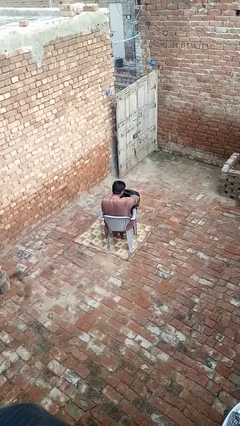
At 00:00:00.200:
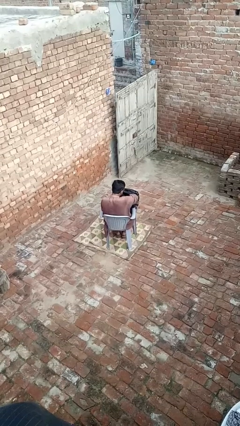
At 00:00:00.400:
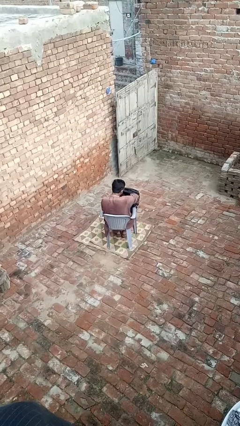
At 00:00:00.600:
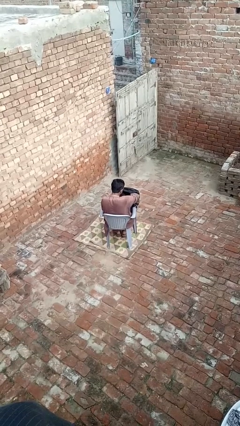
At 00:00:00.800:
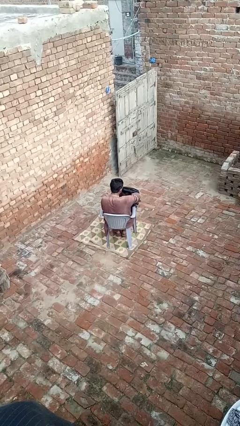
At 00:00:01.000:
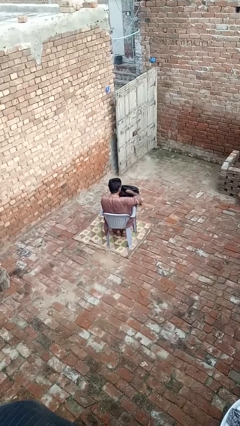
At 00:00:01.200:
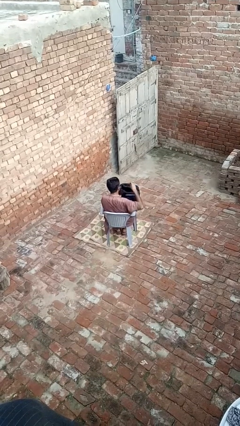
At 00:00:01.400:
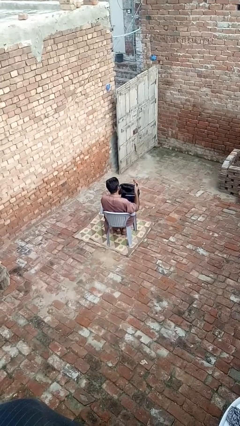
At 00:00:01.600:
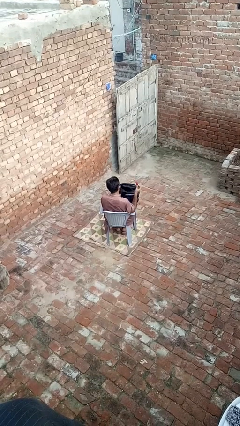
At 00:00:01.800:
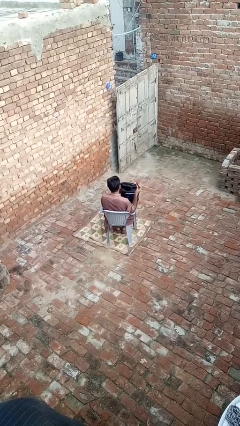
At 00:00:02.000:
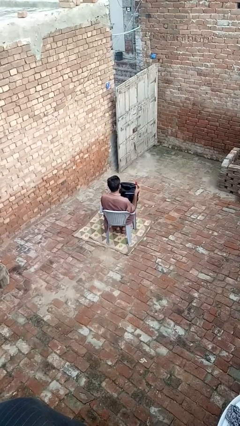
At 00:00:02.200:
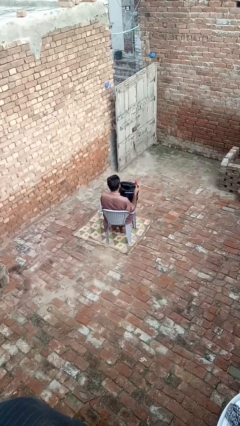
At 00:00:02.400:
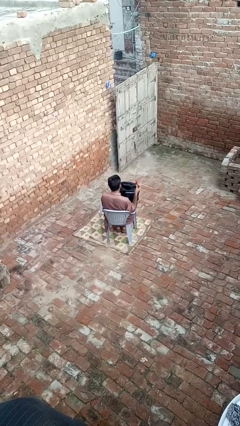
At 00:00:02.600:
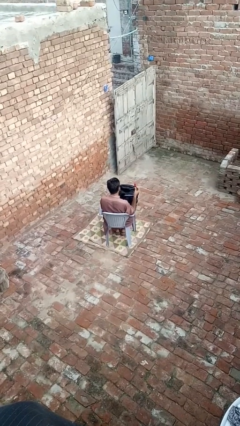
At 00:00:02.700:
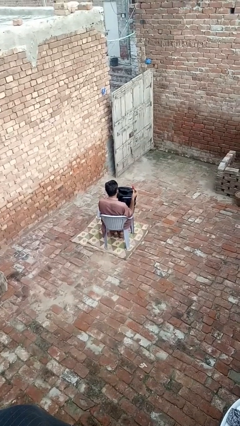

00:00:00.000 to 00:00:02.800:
person takes object from backpack

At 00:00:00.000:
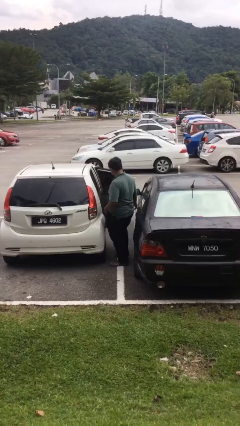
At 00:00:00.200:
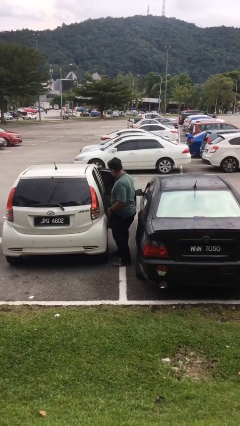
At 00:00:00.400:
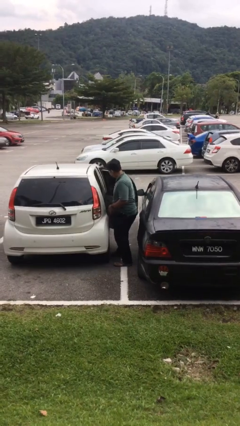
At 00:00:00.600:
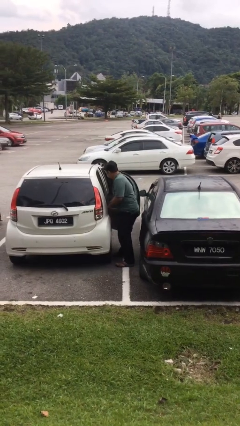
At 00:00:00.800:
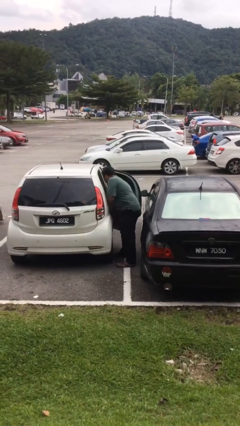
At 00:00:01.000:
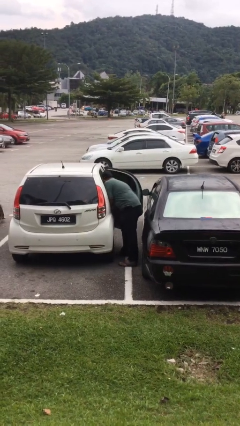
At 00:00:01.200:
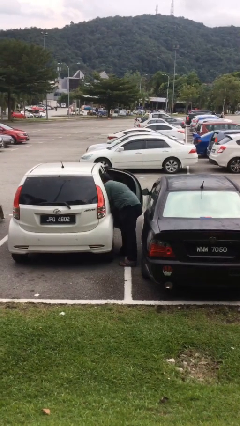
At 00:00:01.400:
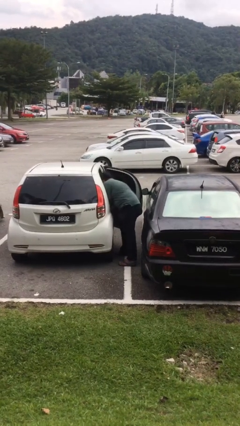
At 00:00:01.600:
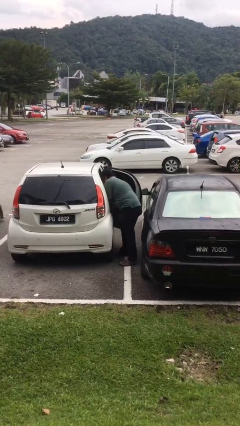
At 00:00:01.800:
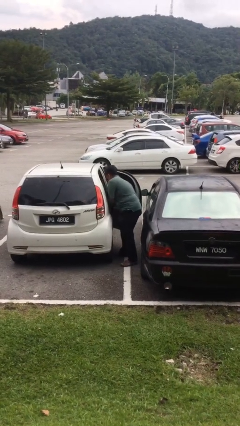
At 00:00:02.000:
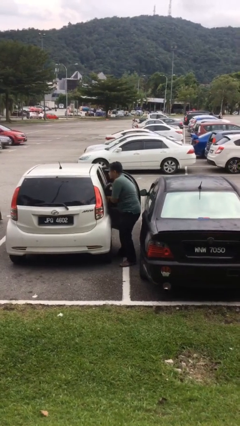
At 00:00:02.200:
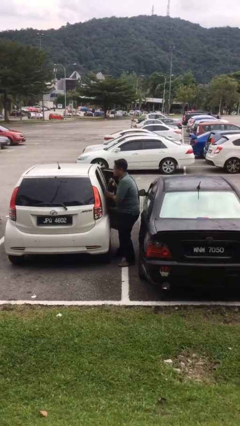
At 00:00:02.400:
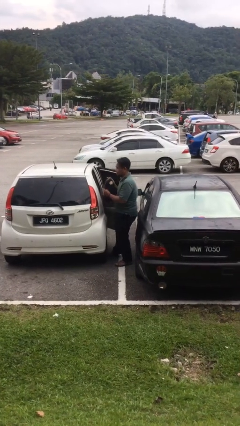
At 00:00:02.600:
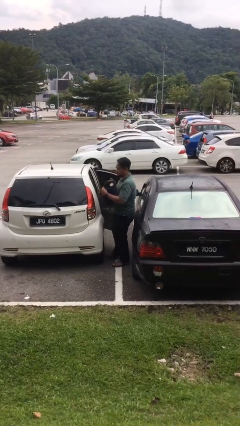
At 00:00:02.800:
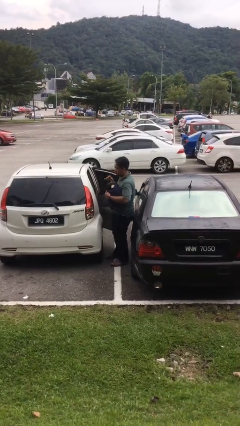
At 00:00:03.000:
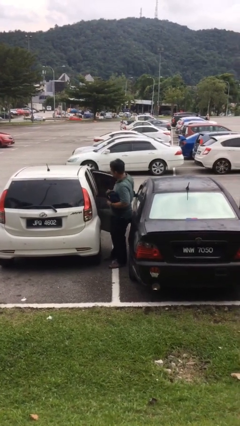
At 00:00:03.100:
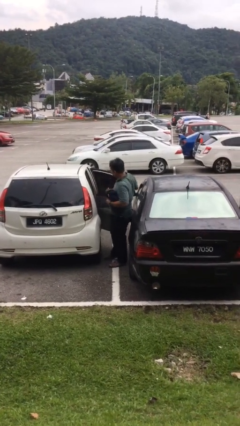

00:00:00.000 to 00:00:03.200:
person unloads car

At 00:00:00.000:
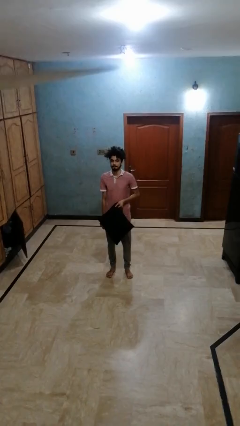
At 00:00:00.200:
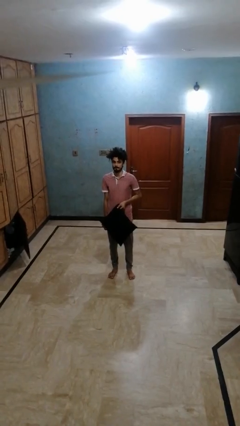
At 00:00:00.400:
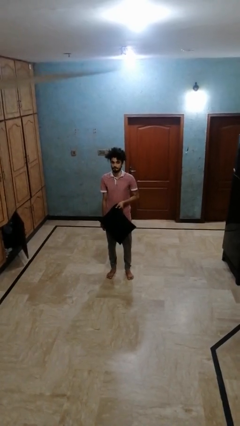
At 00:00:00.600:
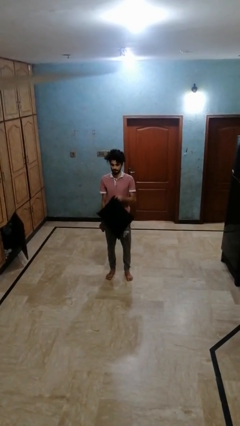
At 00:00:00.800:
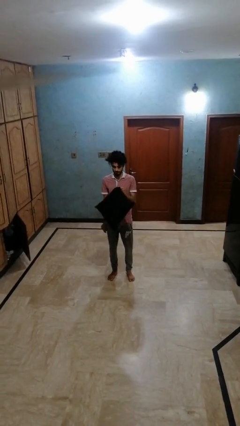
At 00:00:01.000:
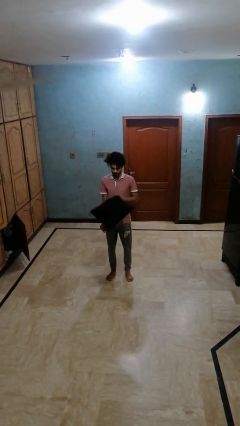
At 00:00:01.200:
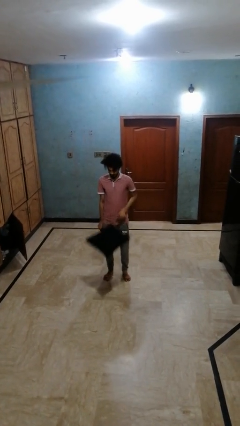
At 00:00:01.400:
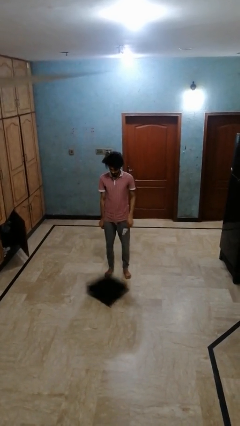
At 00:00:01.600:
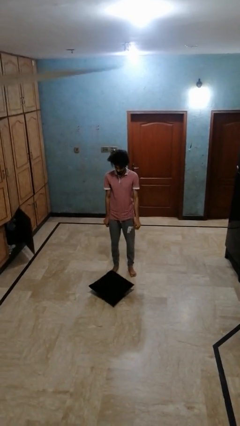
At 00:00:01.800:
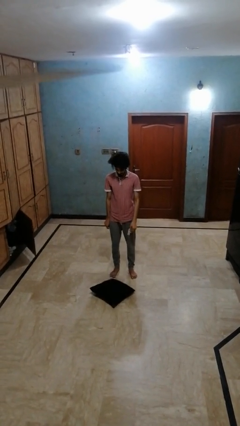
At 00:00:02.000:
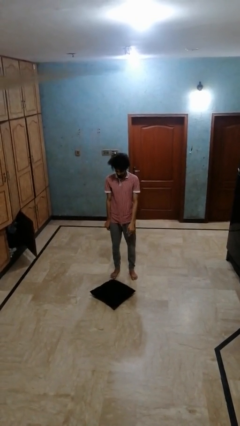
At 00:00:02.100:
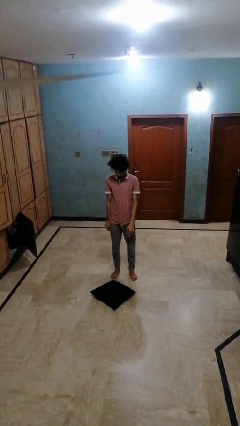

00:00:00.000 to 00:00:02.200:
person throws object to ground

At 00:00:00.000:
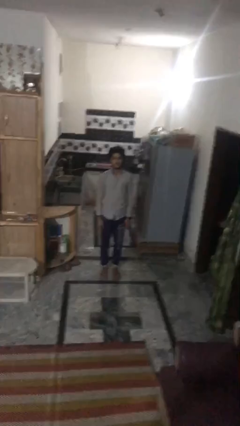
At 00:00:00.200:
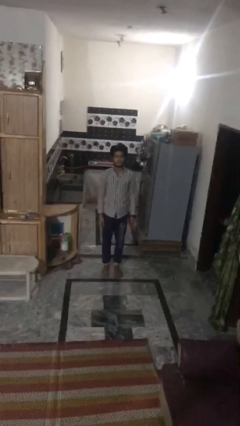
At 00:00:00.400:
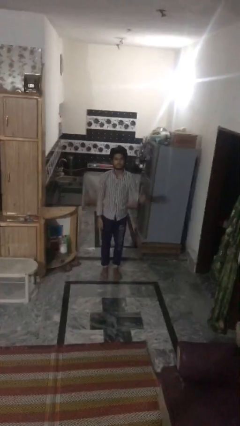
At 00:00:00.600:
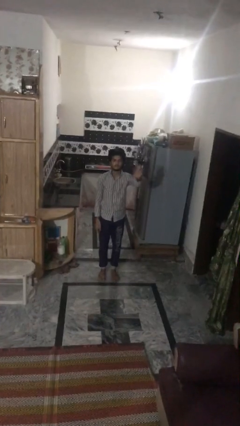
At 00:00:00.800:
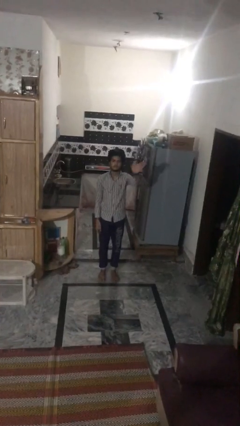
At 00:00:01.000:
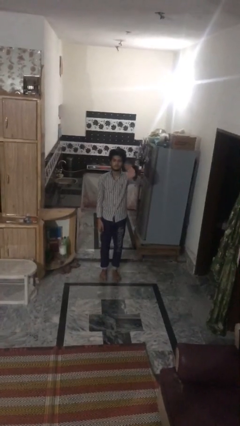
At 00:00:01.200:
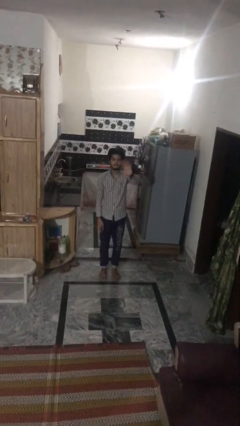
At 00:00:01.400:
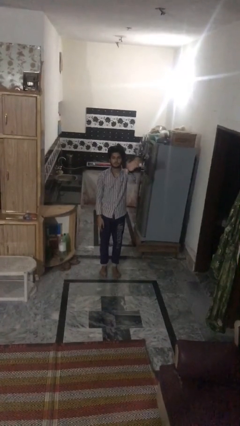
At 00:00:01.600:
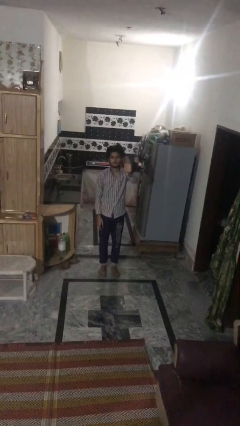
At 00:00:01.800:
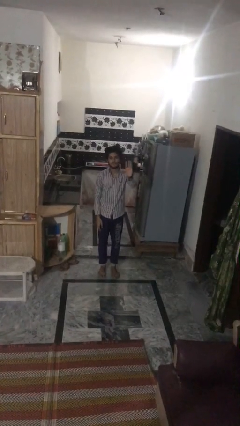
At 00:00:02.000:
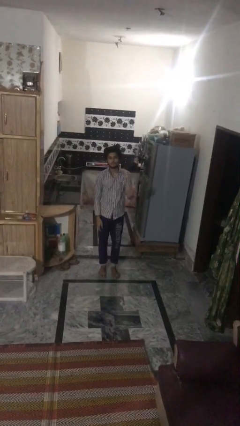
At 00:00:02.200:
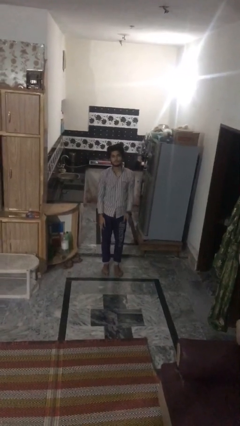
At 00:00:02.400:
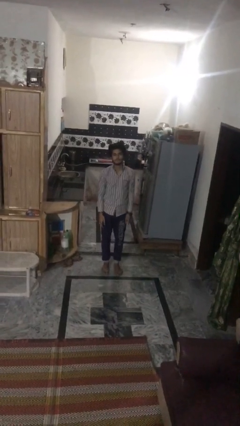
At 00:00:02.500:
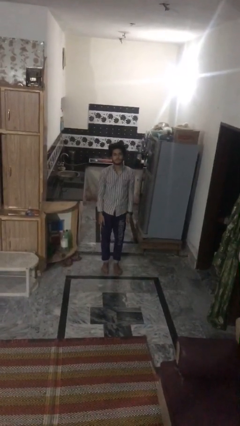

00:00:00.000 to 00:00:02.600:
person waves at person

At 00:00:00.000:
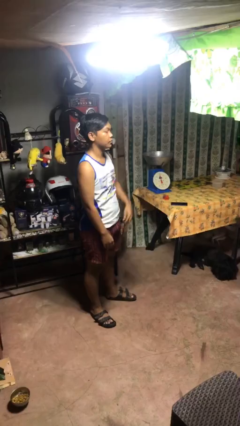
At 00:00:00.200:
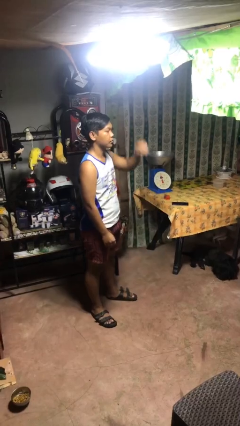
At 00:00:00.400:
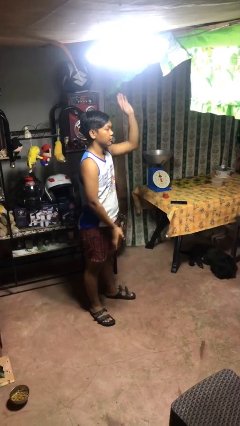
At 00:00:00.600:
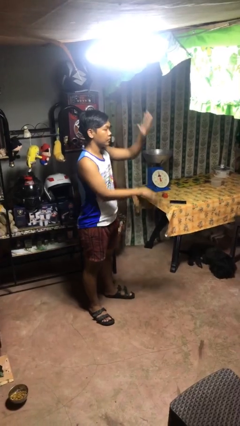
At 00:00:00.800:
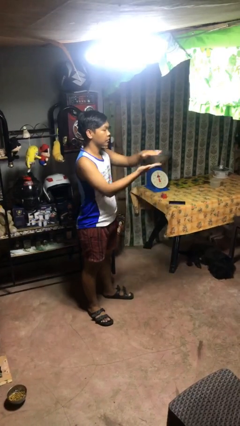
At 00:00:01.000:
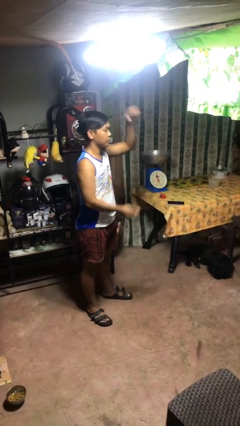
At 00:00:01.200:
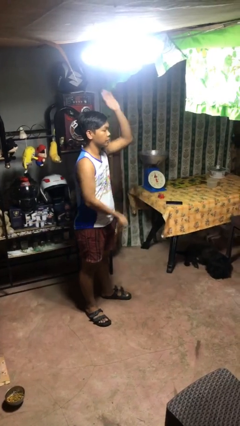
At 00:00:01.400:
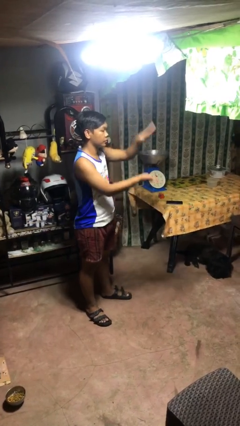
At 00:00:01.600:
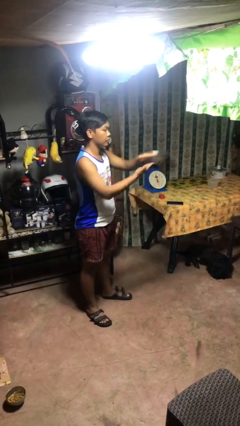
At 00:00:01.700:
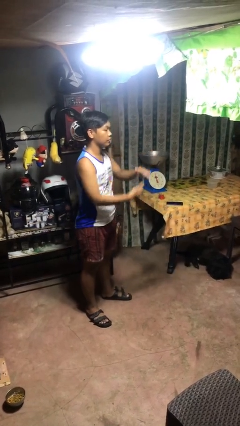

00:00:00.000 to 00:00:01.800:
person gestures zoom out

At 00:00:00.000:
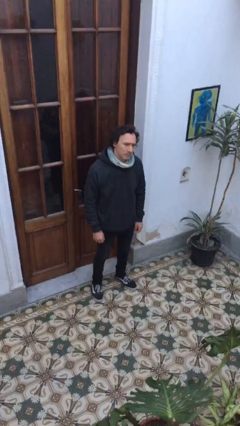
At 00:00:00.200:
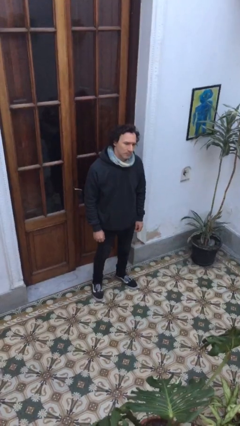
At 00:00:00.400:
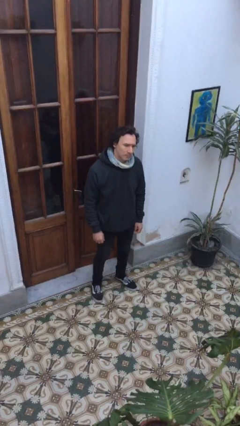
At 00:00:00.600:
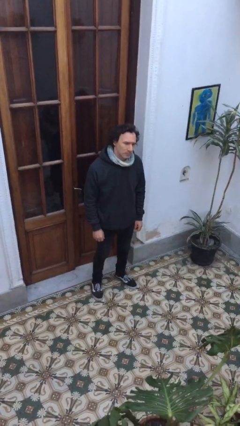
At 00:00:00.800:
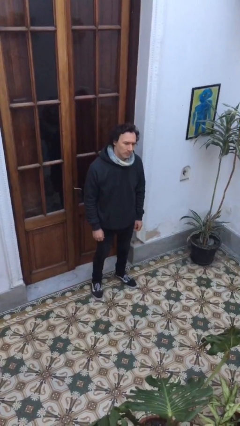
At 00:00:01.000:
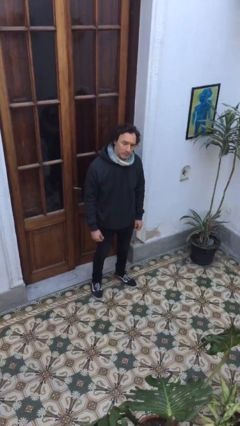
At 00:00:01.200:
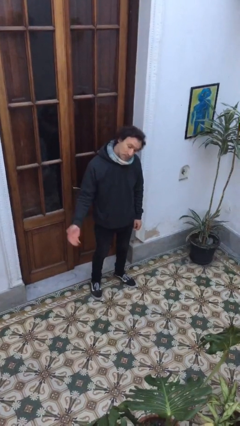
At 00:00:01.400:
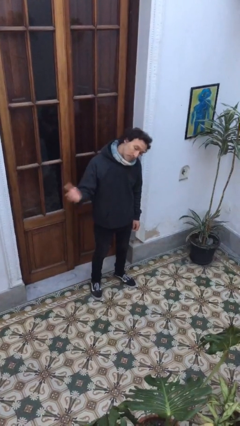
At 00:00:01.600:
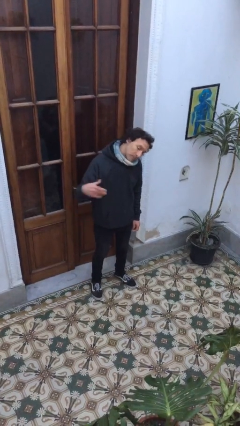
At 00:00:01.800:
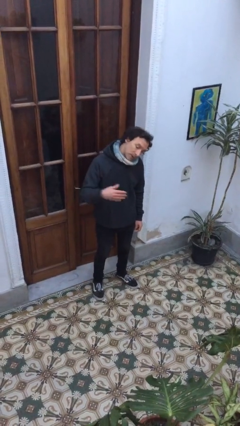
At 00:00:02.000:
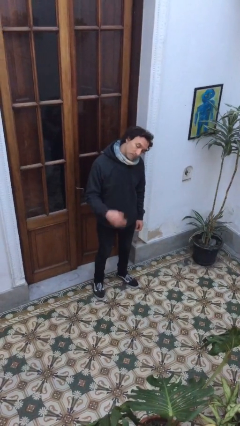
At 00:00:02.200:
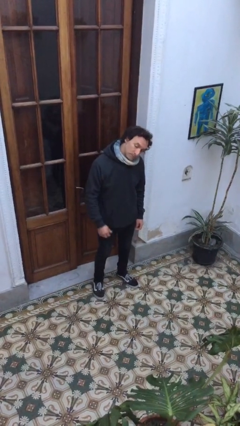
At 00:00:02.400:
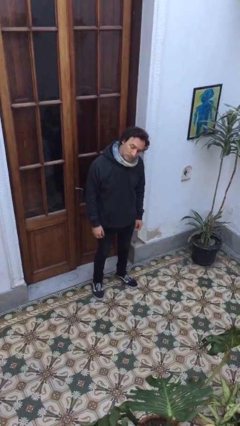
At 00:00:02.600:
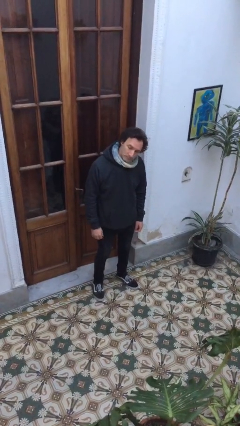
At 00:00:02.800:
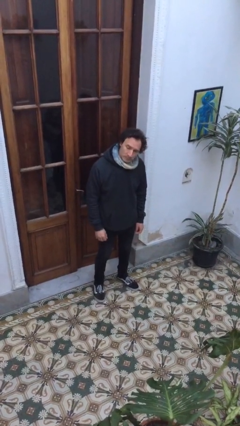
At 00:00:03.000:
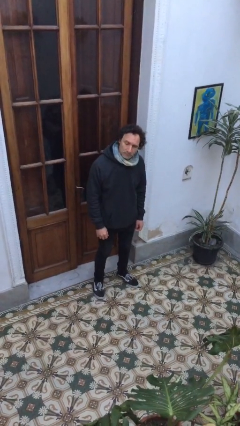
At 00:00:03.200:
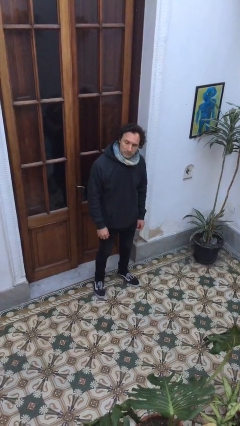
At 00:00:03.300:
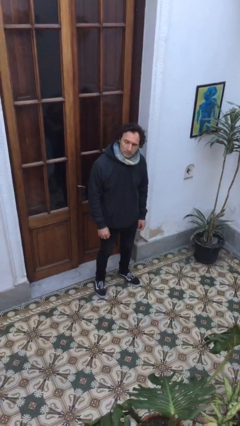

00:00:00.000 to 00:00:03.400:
person gestures come here

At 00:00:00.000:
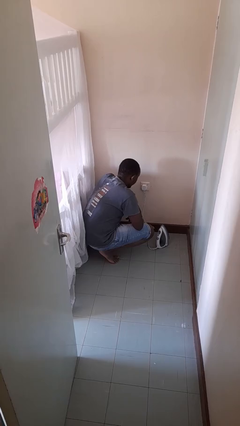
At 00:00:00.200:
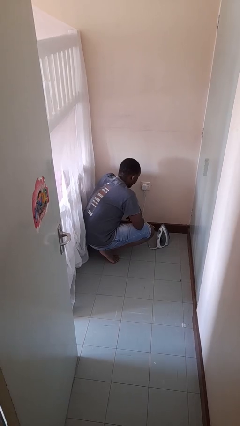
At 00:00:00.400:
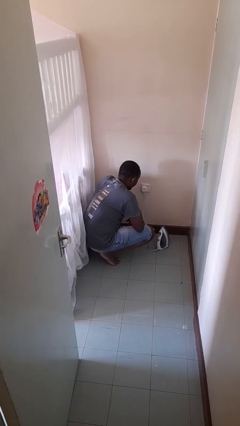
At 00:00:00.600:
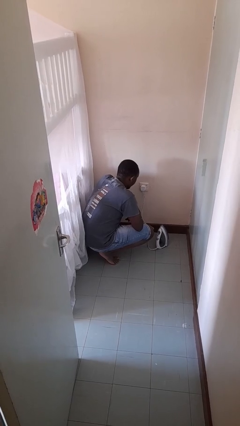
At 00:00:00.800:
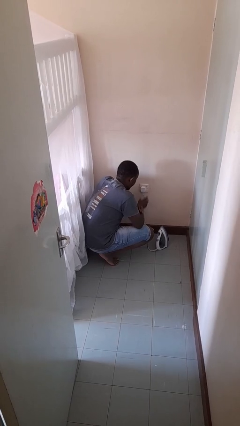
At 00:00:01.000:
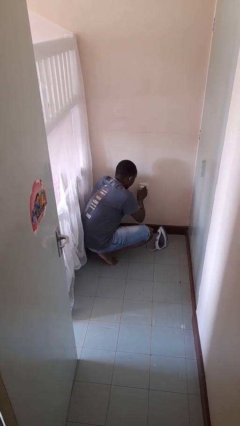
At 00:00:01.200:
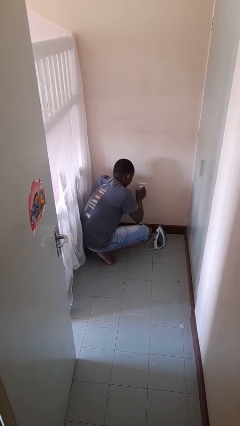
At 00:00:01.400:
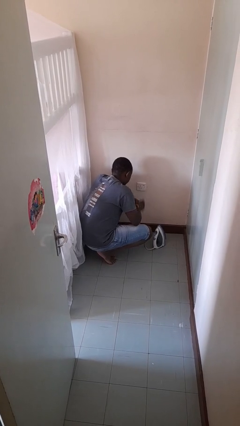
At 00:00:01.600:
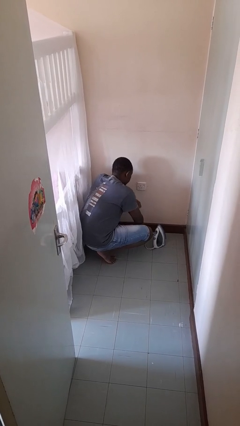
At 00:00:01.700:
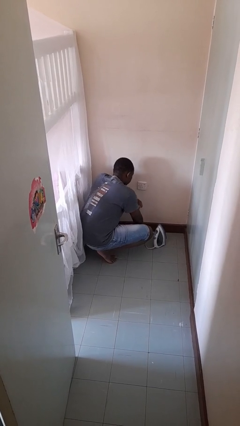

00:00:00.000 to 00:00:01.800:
person unplugs from electrical socket
